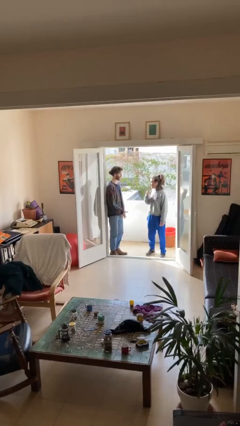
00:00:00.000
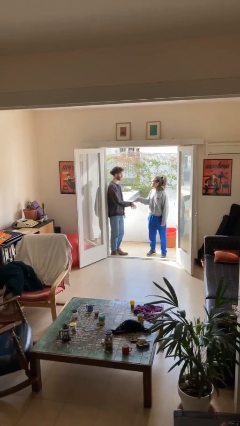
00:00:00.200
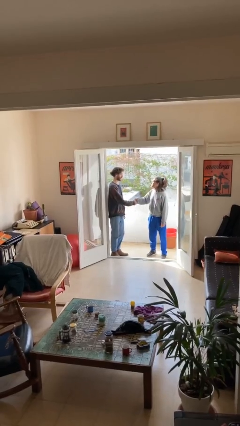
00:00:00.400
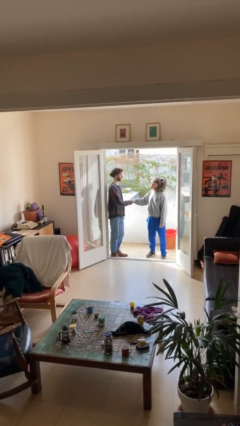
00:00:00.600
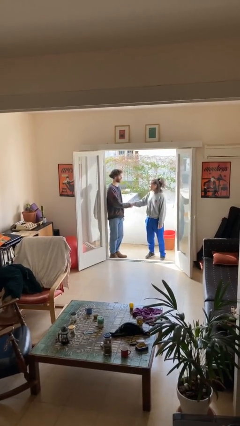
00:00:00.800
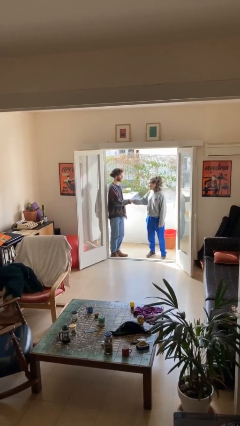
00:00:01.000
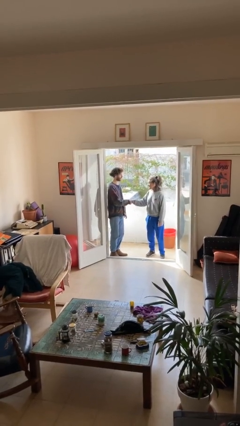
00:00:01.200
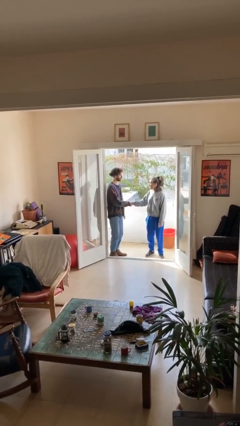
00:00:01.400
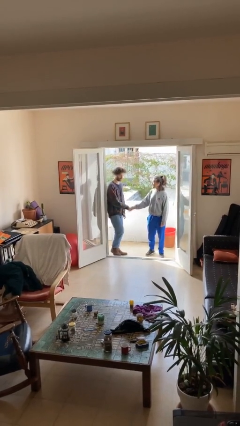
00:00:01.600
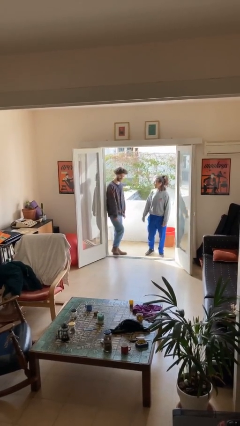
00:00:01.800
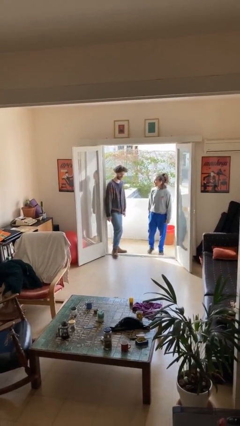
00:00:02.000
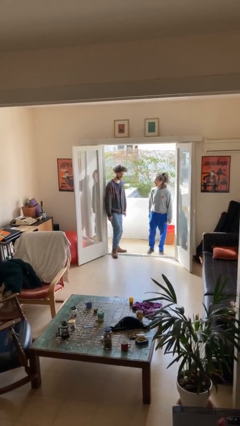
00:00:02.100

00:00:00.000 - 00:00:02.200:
person shakes hand

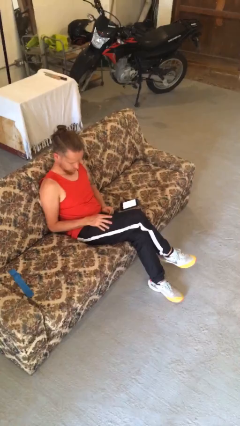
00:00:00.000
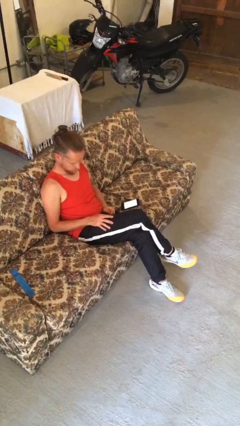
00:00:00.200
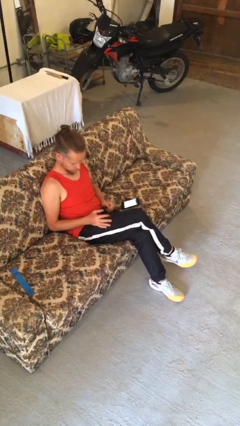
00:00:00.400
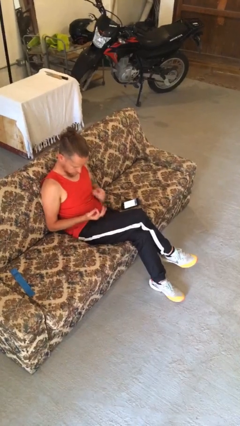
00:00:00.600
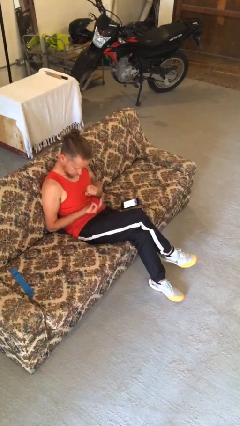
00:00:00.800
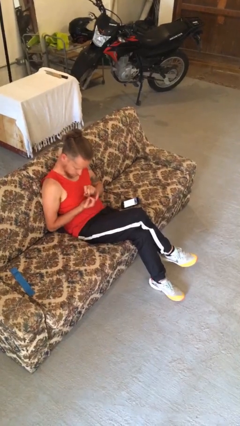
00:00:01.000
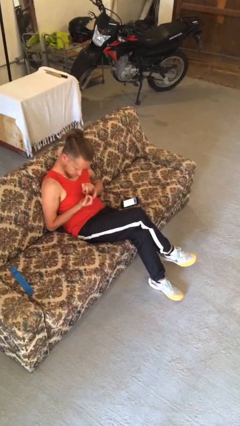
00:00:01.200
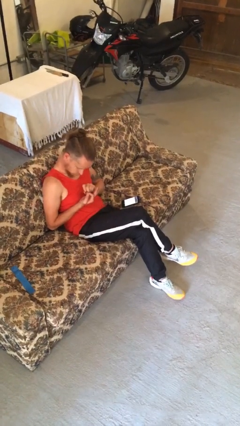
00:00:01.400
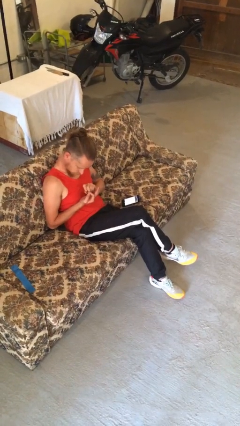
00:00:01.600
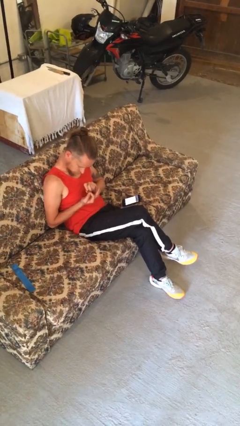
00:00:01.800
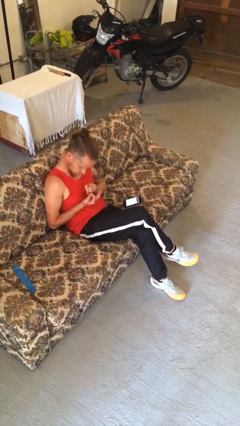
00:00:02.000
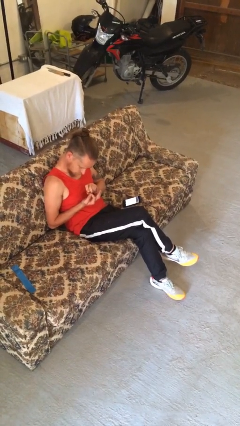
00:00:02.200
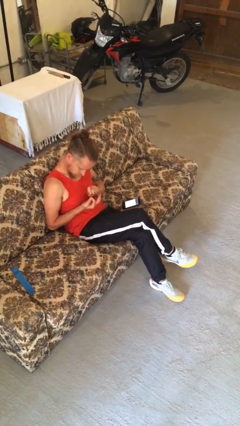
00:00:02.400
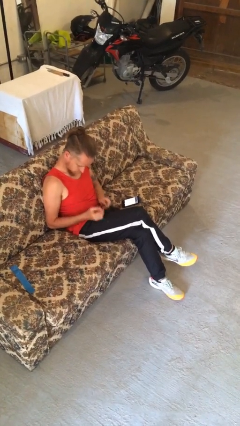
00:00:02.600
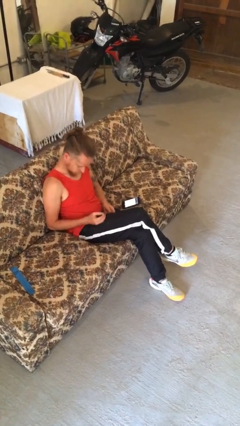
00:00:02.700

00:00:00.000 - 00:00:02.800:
person files fingernails

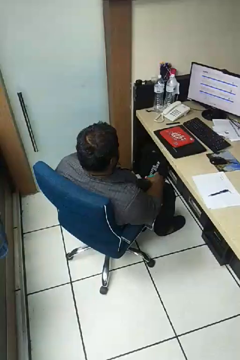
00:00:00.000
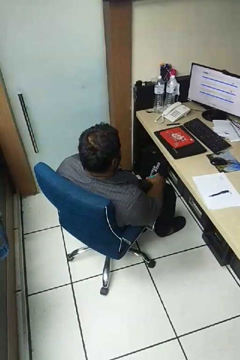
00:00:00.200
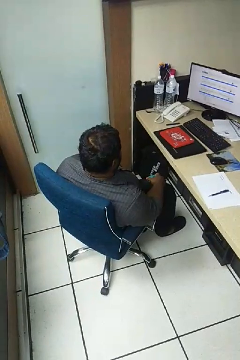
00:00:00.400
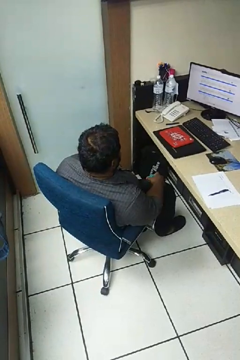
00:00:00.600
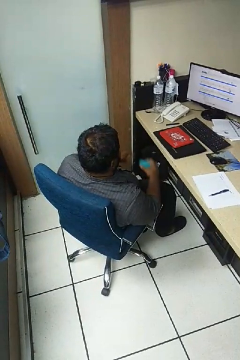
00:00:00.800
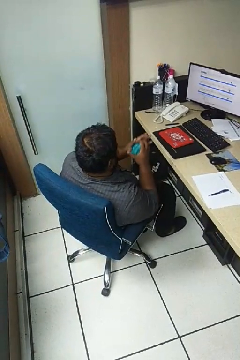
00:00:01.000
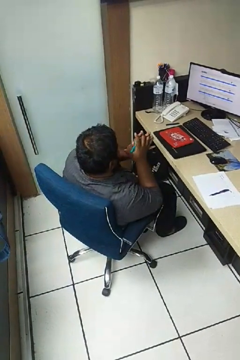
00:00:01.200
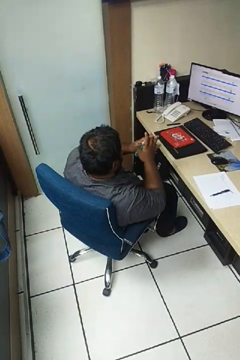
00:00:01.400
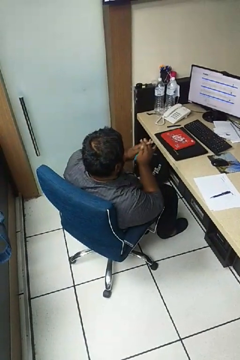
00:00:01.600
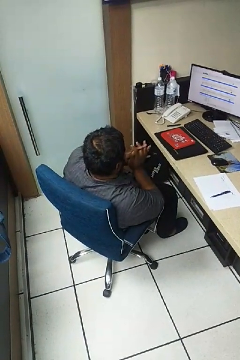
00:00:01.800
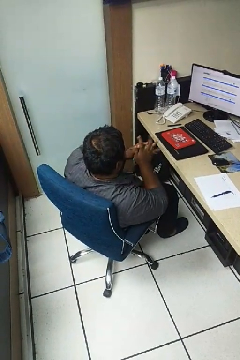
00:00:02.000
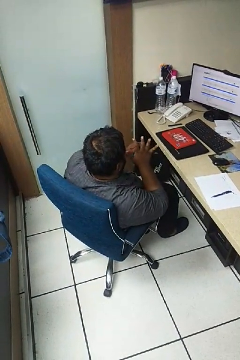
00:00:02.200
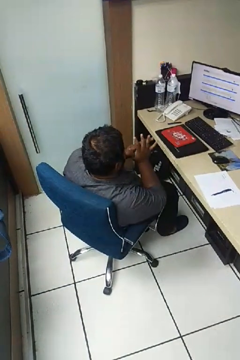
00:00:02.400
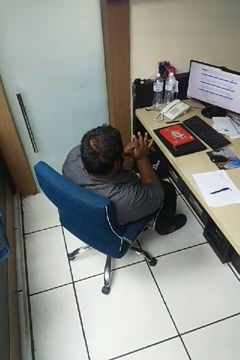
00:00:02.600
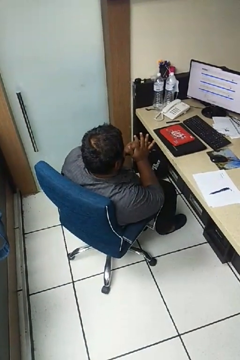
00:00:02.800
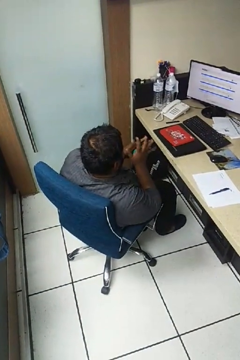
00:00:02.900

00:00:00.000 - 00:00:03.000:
person squeezes object

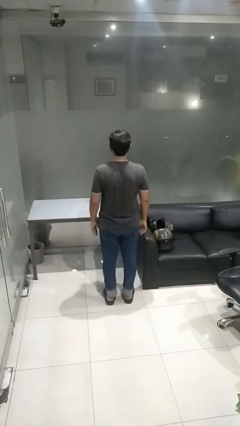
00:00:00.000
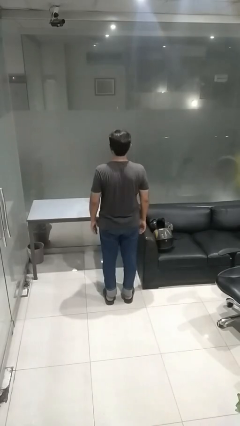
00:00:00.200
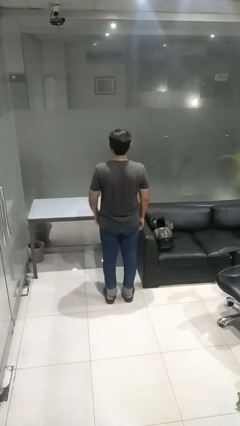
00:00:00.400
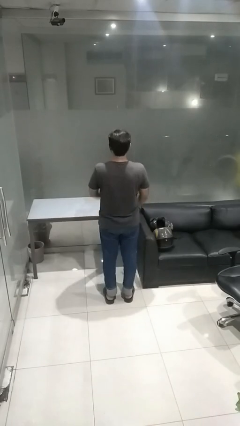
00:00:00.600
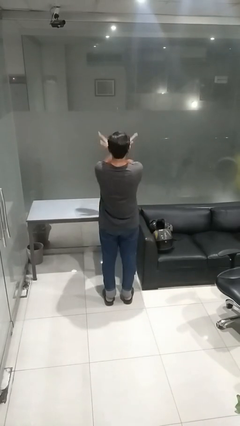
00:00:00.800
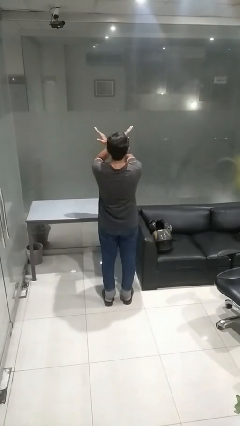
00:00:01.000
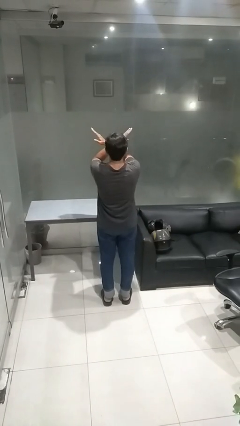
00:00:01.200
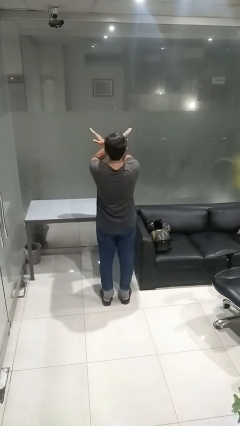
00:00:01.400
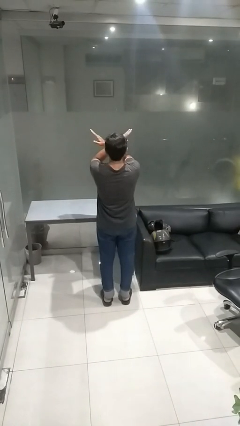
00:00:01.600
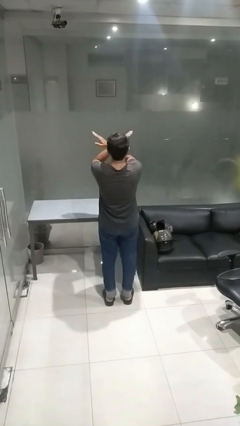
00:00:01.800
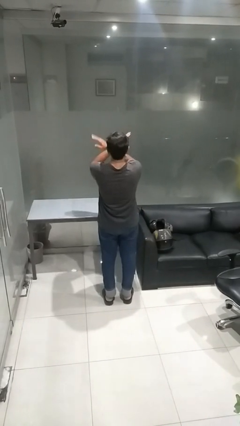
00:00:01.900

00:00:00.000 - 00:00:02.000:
person gestures arms x

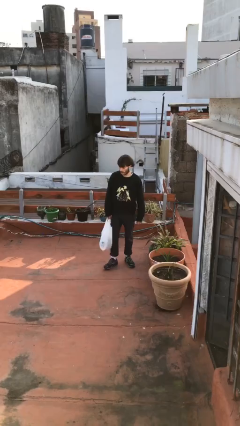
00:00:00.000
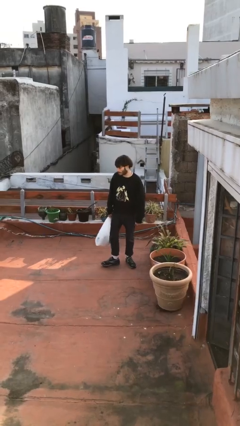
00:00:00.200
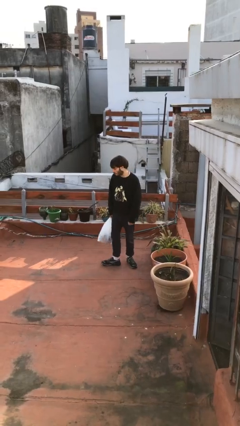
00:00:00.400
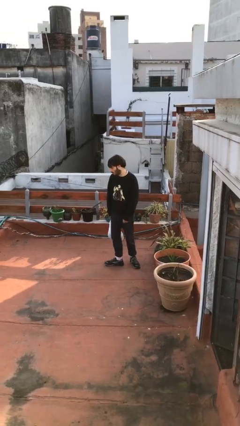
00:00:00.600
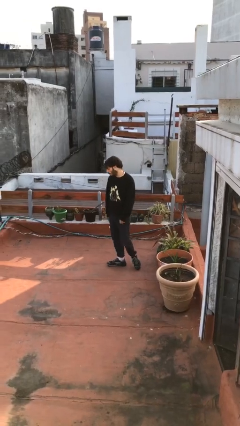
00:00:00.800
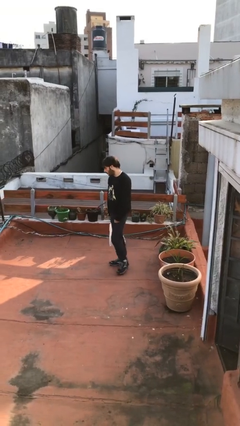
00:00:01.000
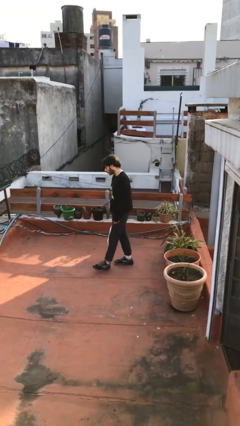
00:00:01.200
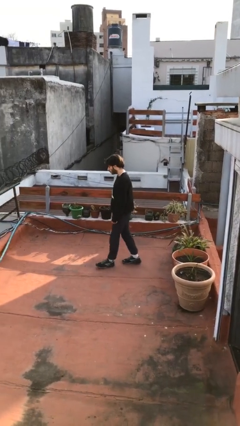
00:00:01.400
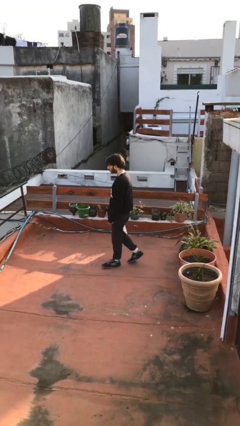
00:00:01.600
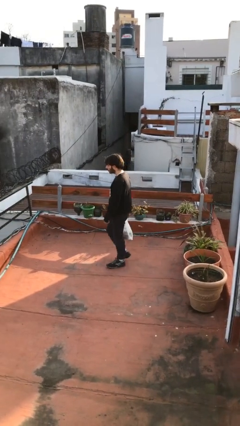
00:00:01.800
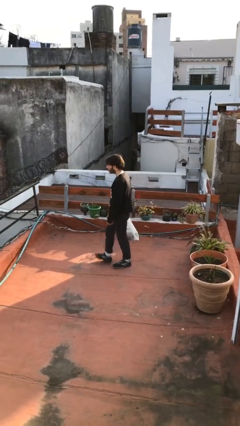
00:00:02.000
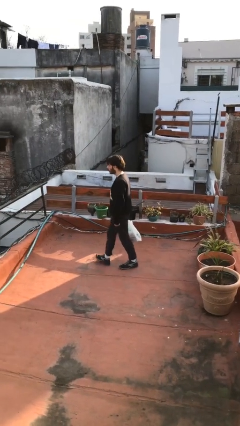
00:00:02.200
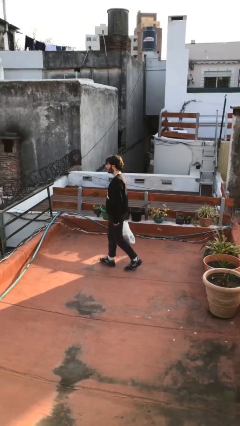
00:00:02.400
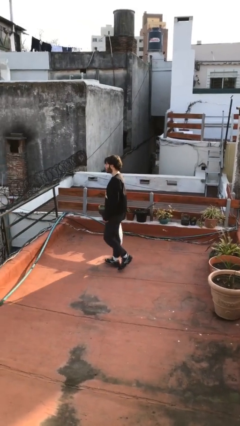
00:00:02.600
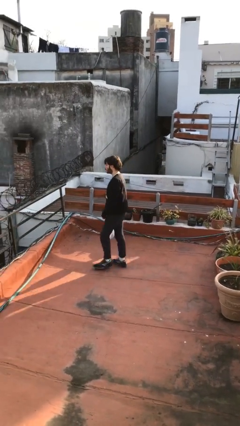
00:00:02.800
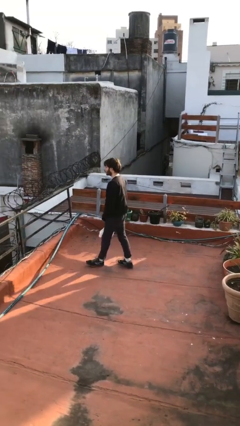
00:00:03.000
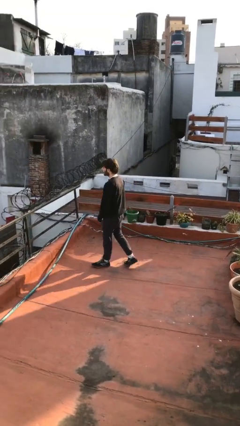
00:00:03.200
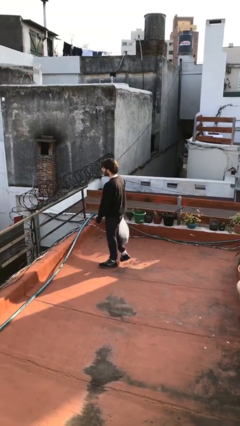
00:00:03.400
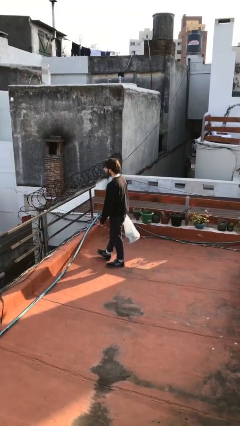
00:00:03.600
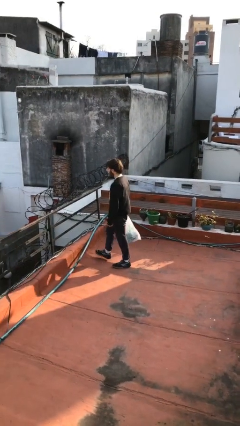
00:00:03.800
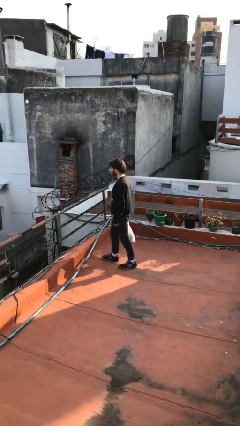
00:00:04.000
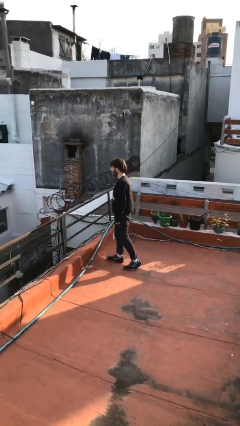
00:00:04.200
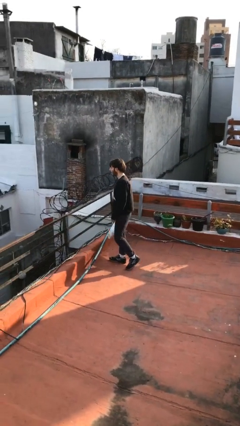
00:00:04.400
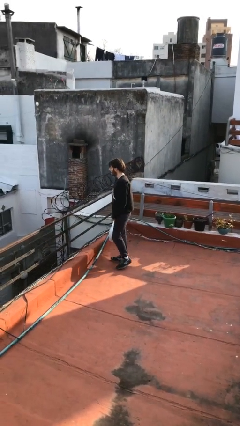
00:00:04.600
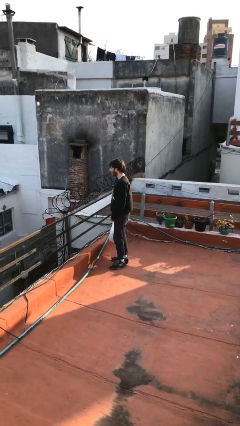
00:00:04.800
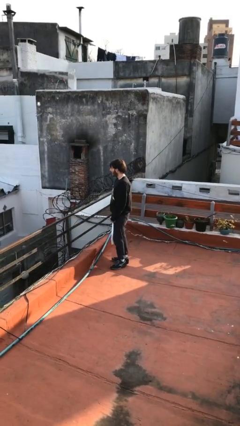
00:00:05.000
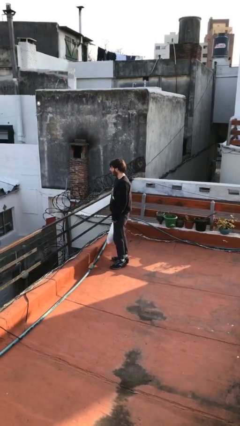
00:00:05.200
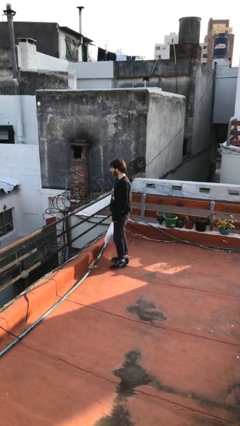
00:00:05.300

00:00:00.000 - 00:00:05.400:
person carries groceries

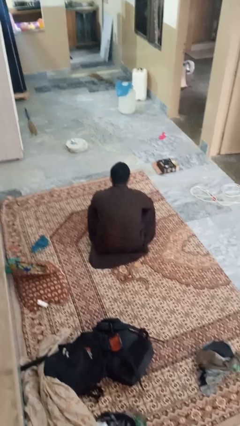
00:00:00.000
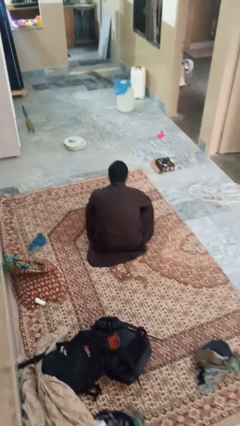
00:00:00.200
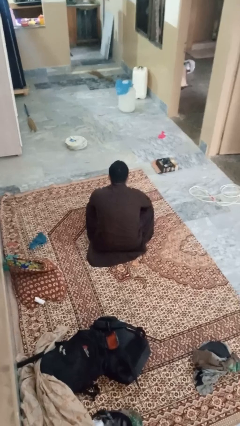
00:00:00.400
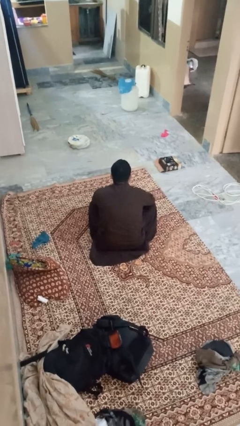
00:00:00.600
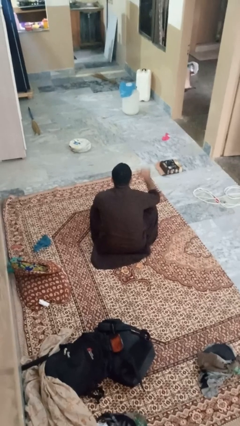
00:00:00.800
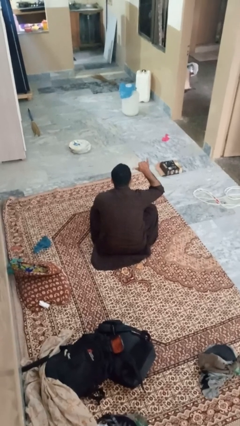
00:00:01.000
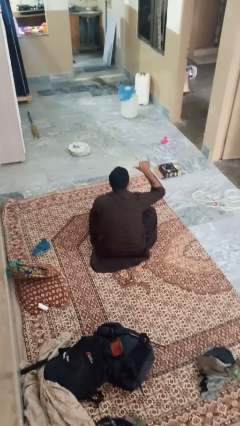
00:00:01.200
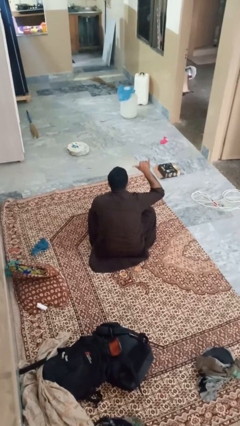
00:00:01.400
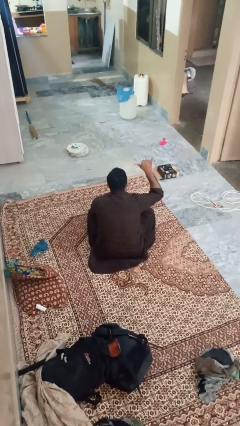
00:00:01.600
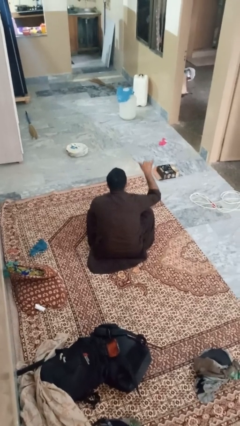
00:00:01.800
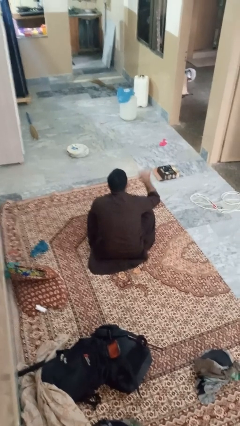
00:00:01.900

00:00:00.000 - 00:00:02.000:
person gestures hang loose

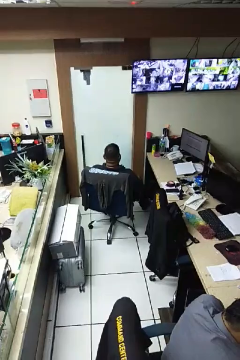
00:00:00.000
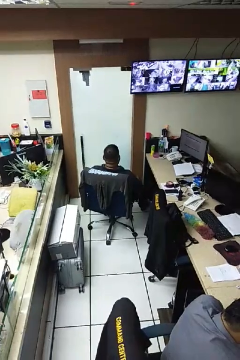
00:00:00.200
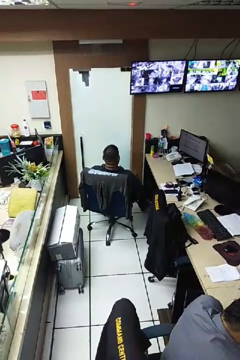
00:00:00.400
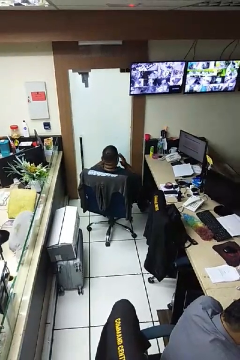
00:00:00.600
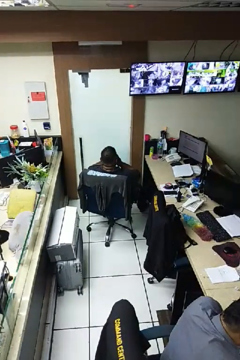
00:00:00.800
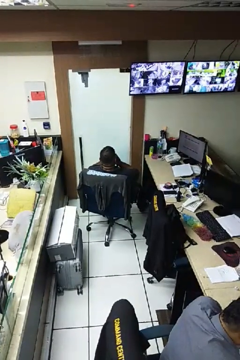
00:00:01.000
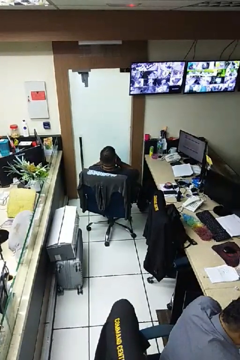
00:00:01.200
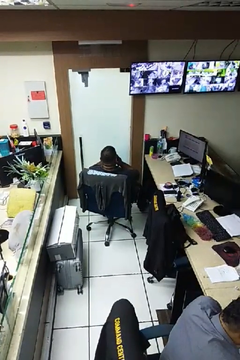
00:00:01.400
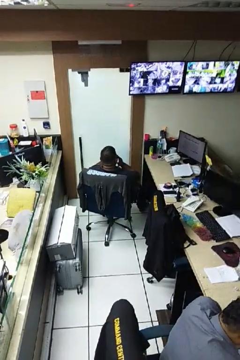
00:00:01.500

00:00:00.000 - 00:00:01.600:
person covers face with hands
